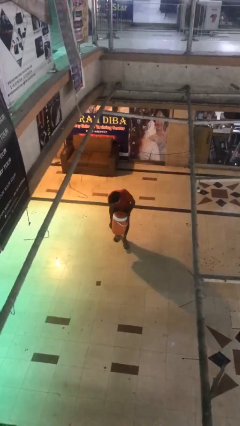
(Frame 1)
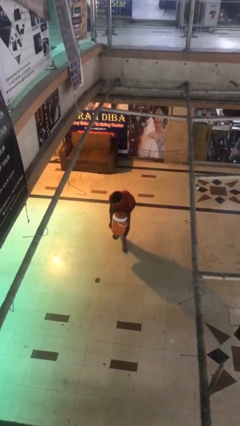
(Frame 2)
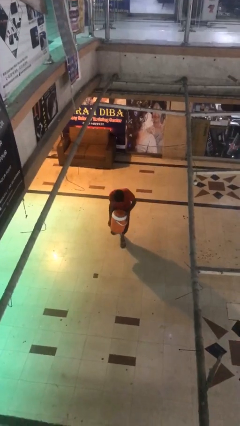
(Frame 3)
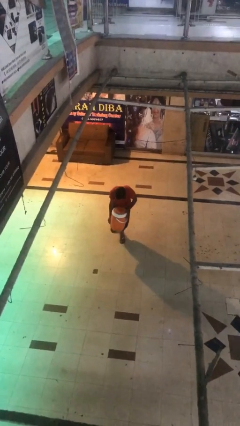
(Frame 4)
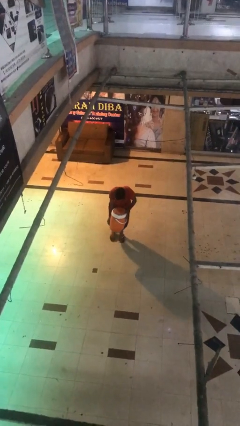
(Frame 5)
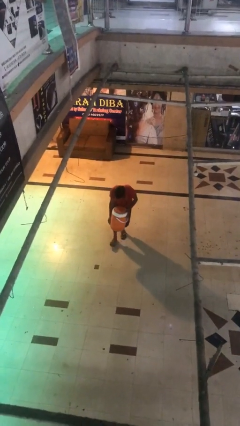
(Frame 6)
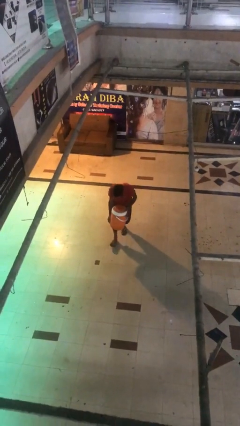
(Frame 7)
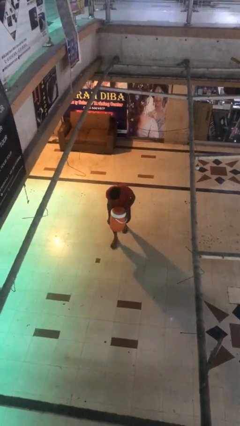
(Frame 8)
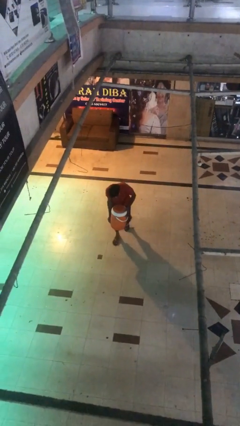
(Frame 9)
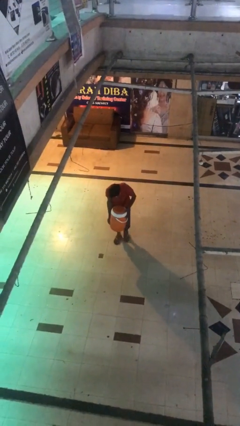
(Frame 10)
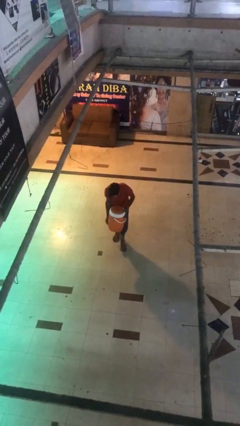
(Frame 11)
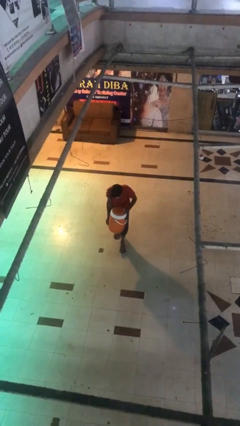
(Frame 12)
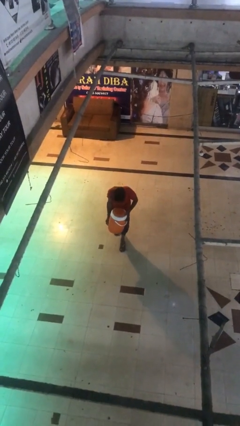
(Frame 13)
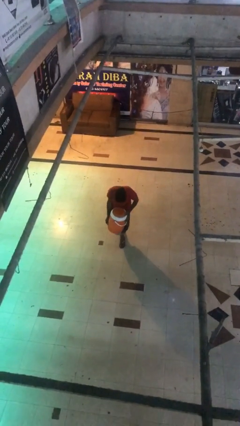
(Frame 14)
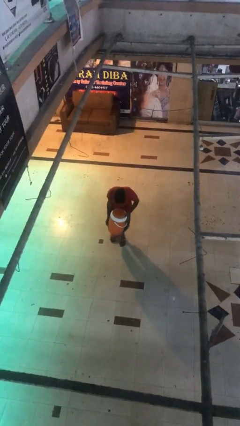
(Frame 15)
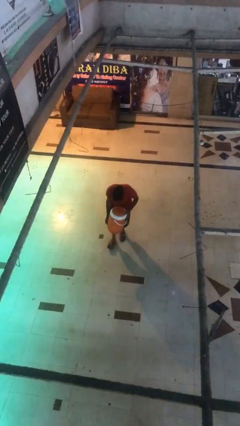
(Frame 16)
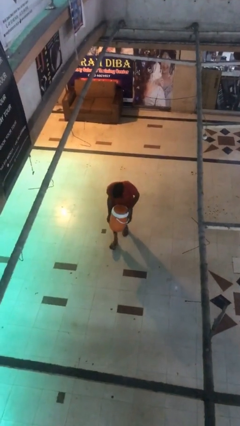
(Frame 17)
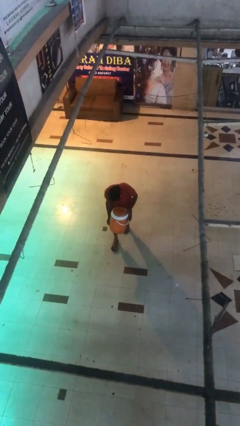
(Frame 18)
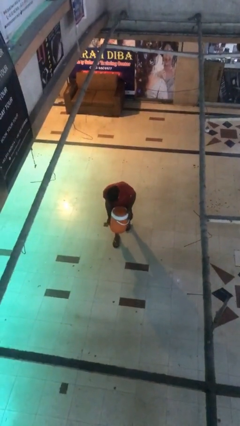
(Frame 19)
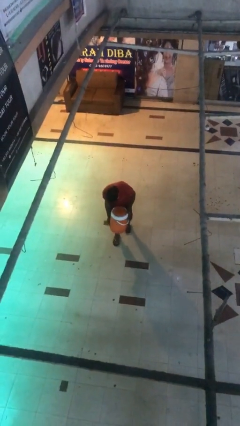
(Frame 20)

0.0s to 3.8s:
person carries heavy object

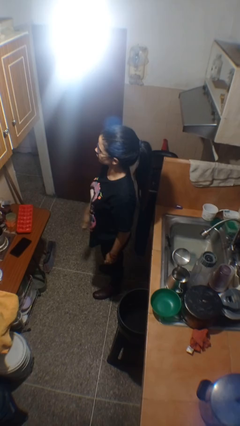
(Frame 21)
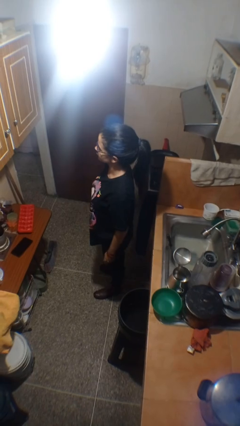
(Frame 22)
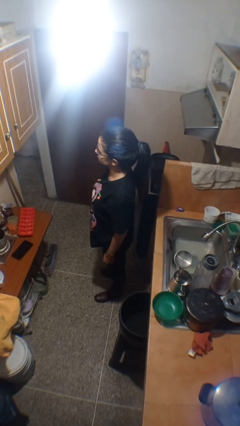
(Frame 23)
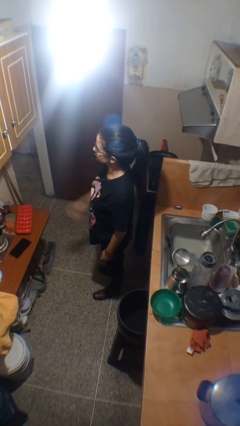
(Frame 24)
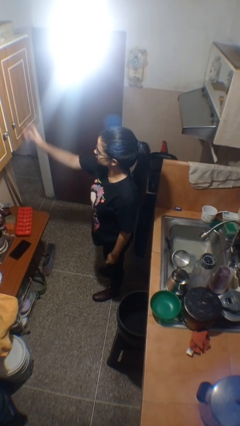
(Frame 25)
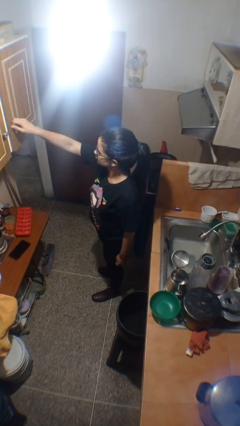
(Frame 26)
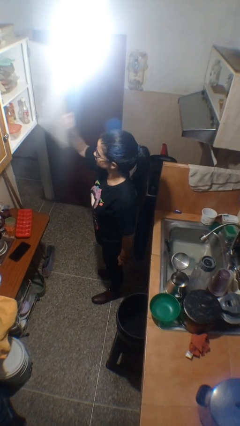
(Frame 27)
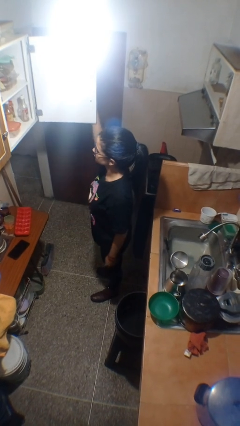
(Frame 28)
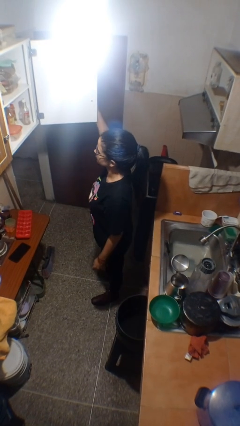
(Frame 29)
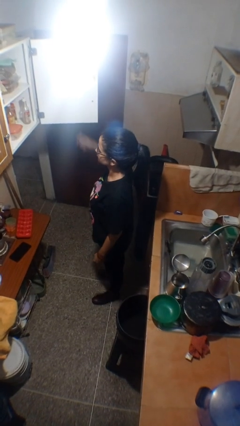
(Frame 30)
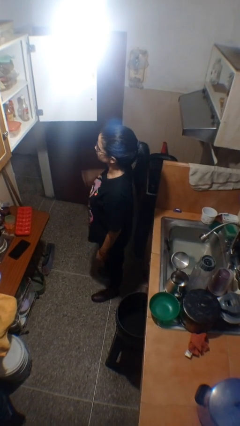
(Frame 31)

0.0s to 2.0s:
person opens cabinet

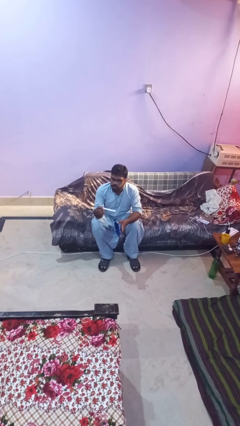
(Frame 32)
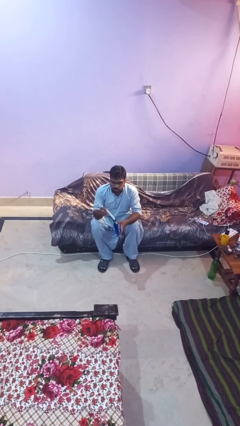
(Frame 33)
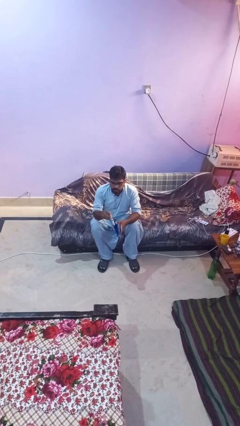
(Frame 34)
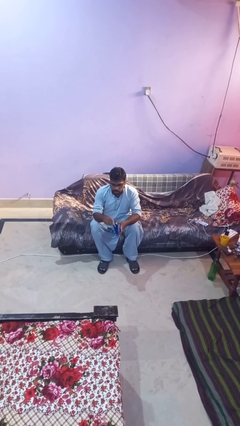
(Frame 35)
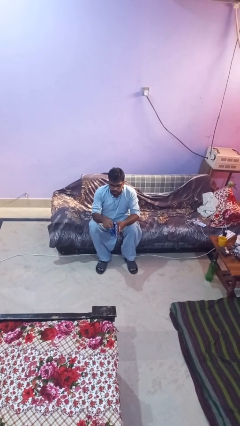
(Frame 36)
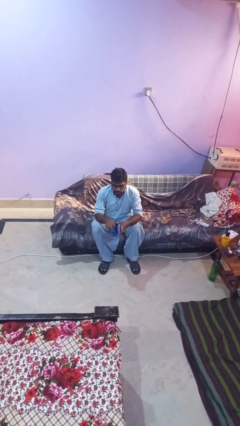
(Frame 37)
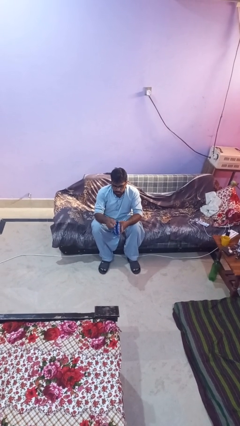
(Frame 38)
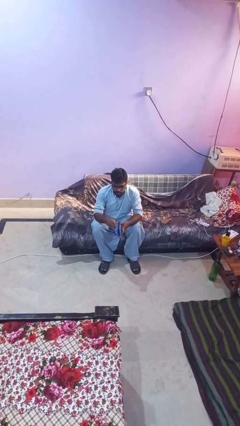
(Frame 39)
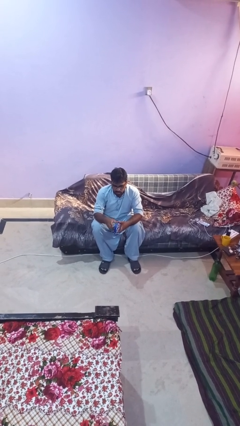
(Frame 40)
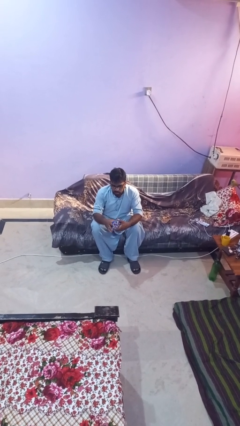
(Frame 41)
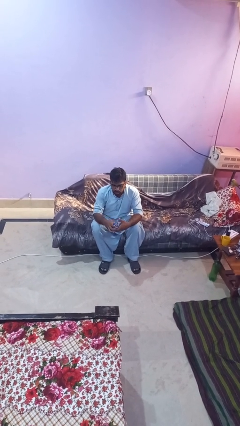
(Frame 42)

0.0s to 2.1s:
person puts object into purse

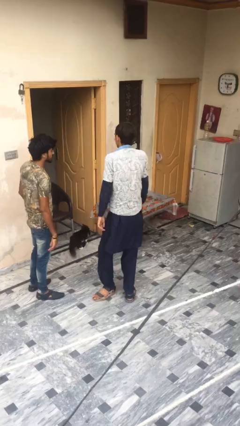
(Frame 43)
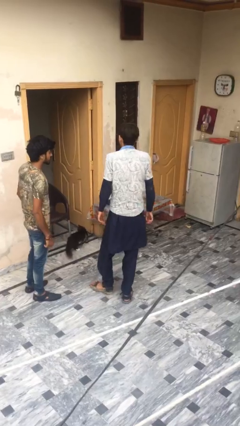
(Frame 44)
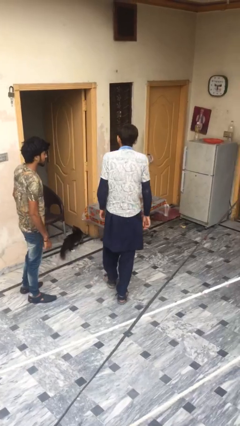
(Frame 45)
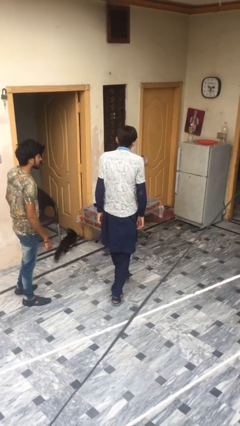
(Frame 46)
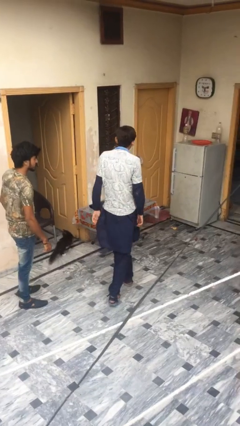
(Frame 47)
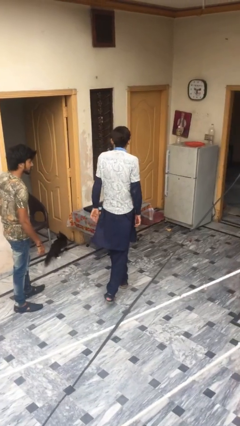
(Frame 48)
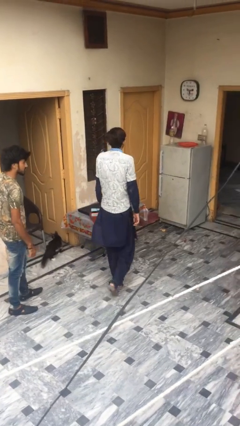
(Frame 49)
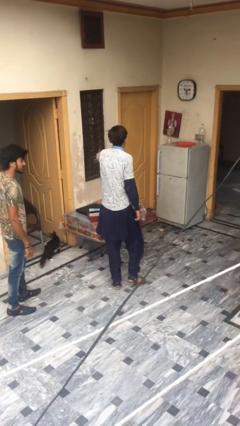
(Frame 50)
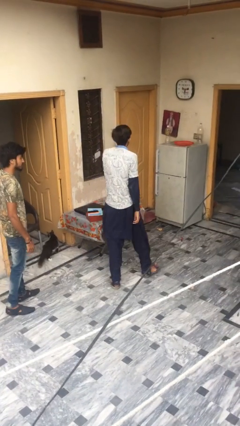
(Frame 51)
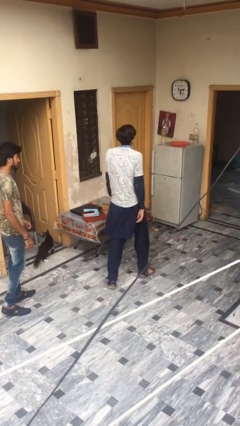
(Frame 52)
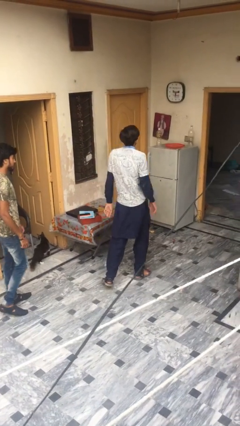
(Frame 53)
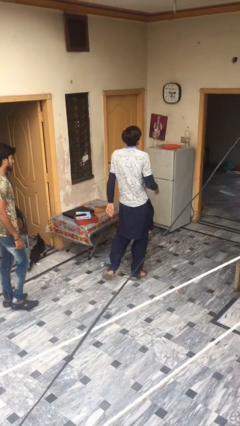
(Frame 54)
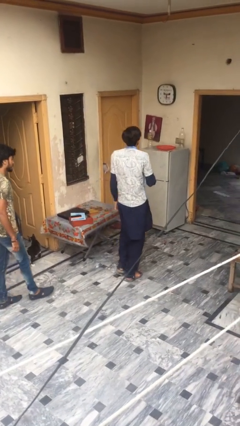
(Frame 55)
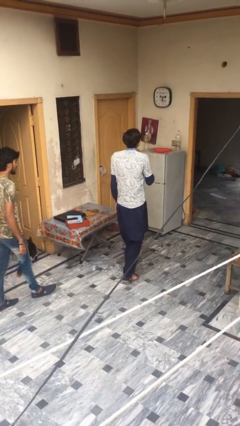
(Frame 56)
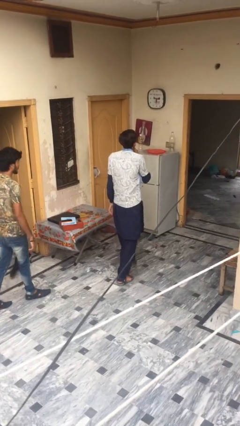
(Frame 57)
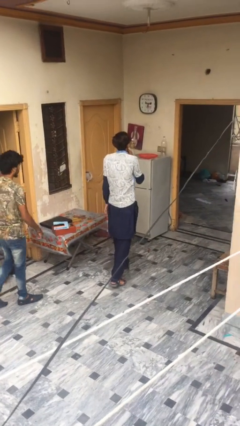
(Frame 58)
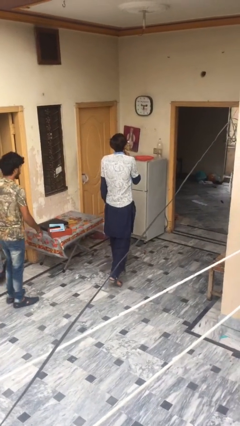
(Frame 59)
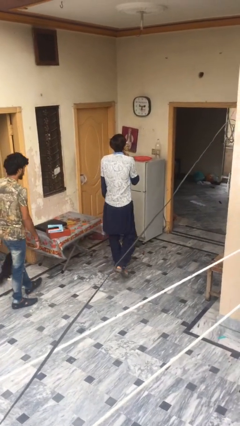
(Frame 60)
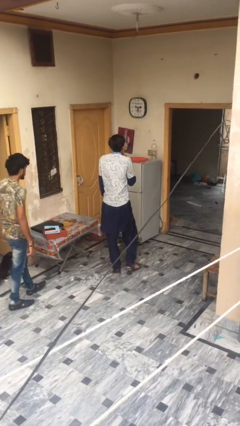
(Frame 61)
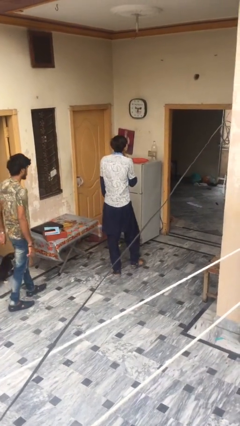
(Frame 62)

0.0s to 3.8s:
person talks to person

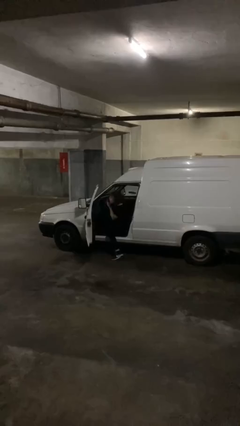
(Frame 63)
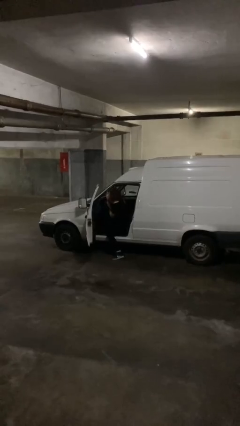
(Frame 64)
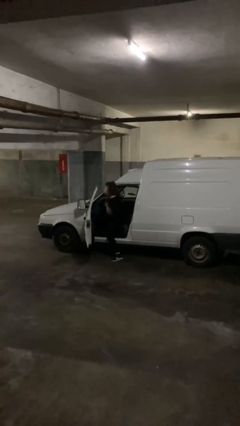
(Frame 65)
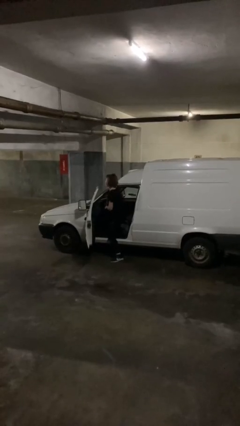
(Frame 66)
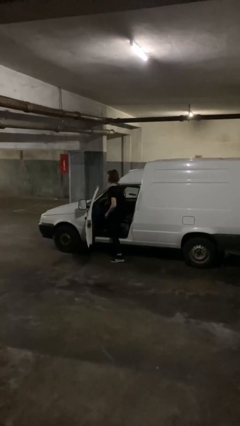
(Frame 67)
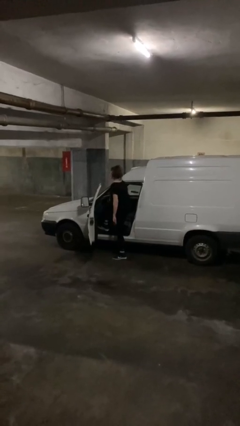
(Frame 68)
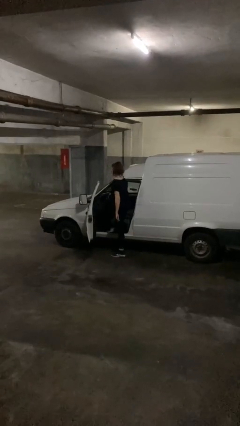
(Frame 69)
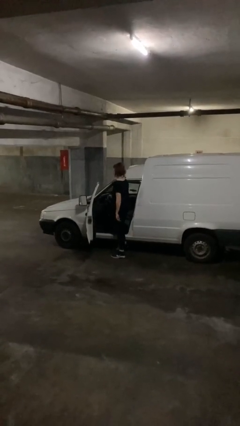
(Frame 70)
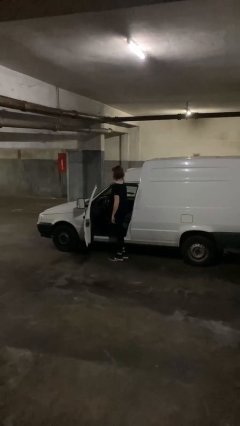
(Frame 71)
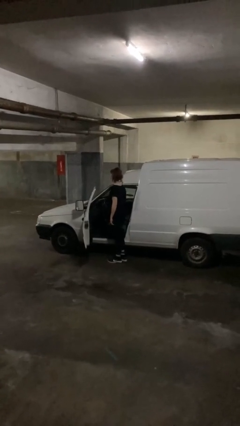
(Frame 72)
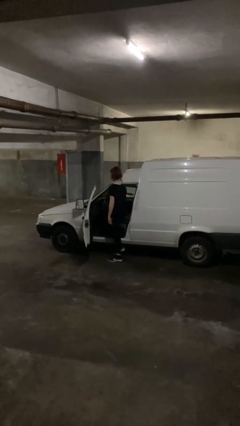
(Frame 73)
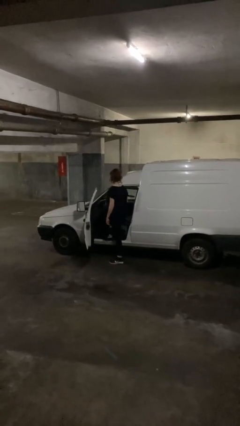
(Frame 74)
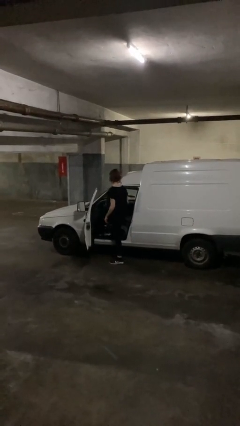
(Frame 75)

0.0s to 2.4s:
person exits car

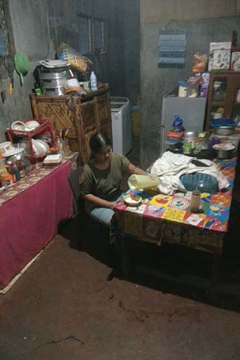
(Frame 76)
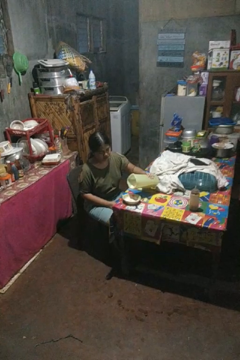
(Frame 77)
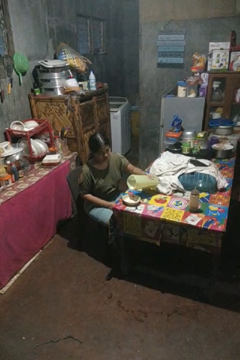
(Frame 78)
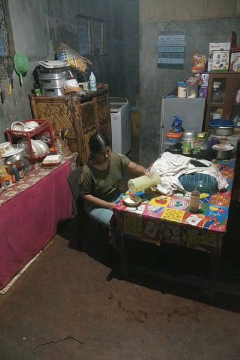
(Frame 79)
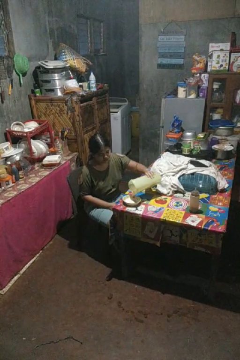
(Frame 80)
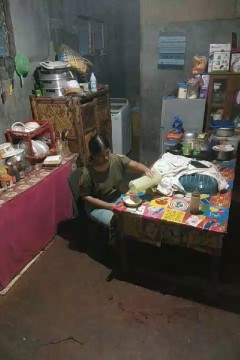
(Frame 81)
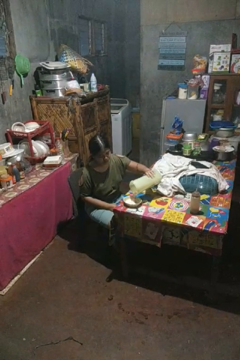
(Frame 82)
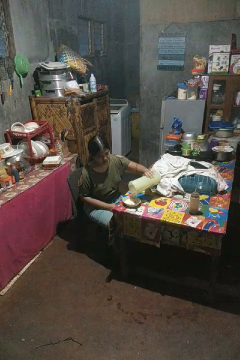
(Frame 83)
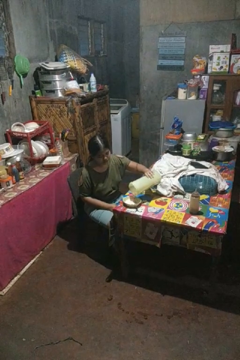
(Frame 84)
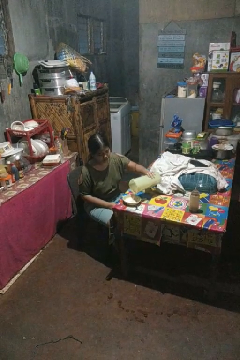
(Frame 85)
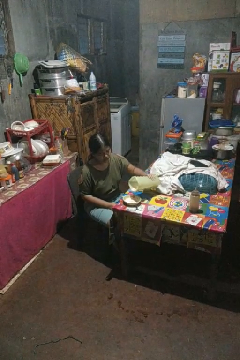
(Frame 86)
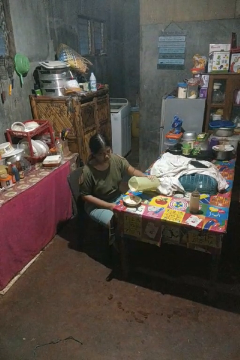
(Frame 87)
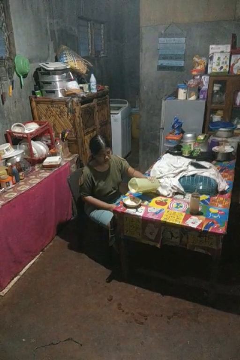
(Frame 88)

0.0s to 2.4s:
person pours into bowl

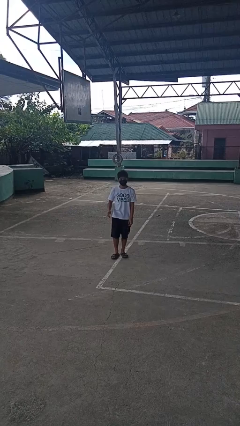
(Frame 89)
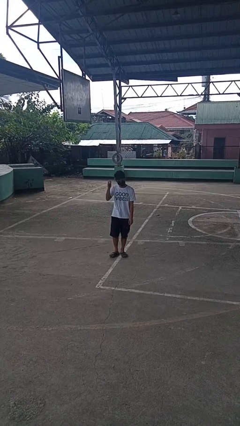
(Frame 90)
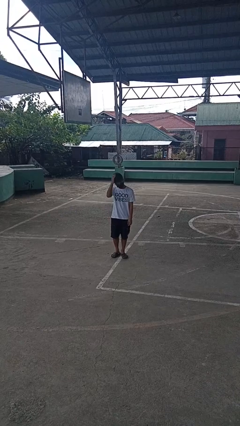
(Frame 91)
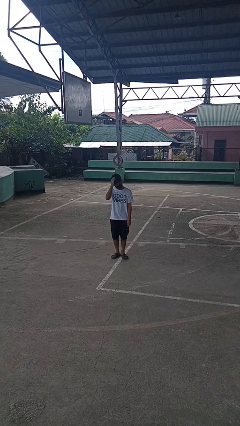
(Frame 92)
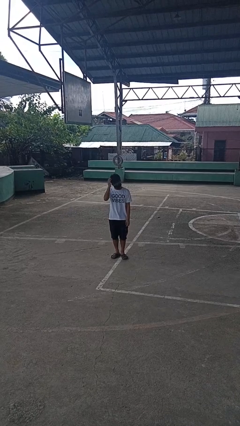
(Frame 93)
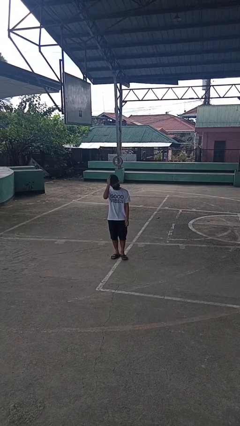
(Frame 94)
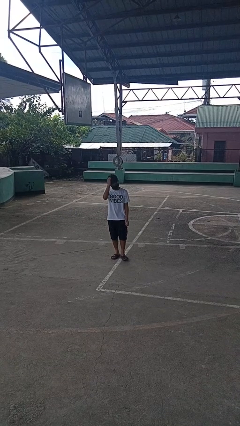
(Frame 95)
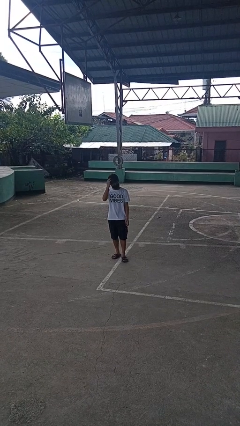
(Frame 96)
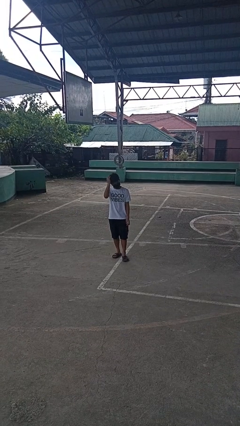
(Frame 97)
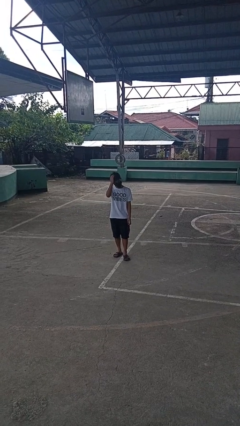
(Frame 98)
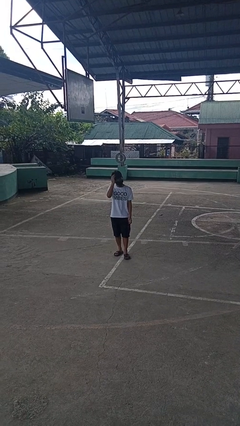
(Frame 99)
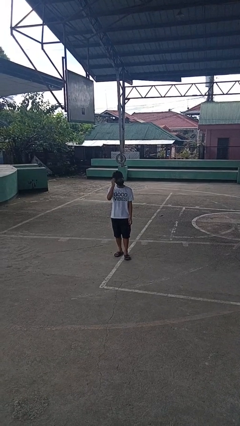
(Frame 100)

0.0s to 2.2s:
person pats head
